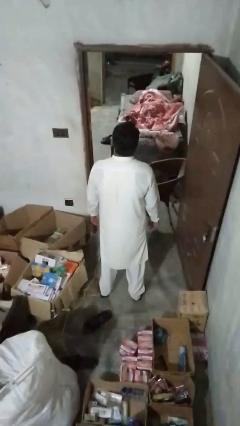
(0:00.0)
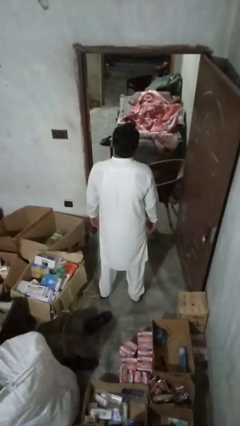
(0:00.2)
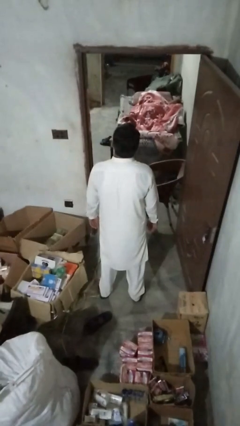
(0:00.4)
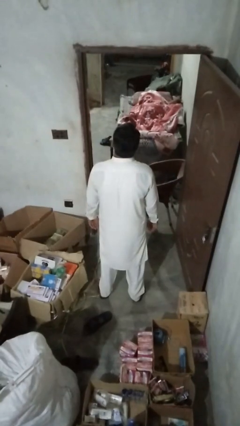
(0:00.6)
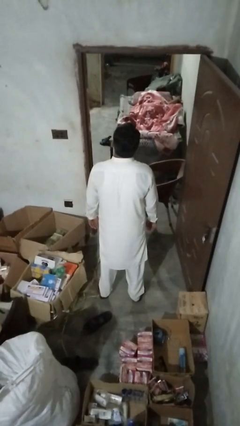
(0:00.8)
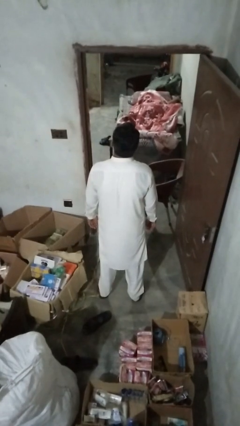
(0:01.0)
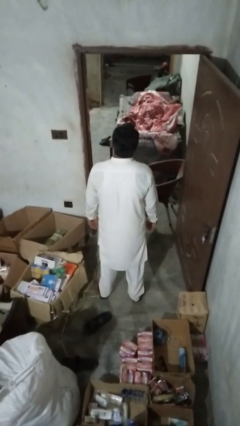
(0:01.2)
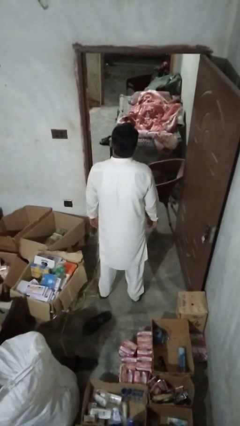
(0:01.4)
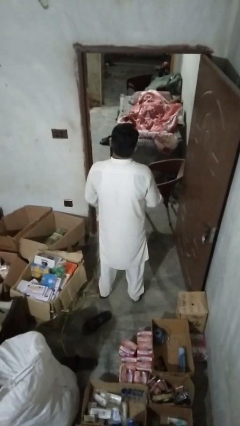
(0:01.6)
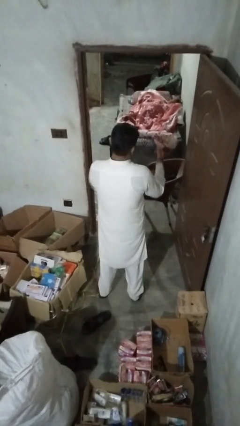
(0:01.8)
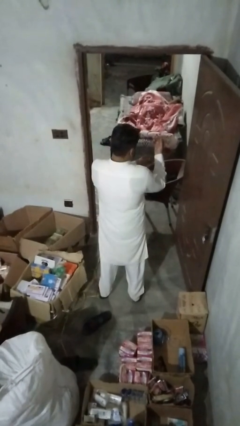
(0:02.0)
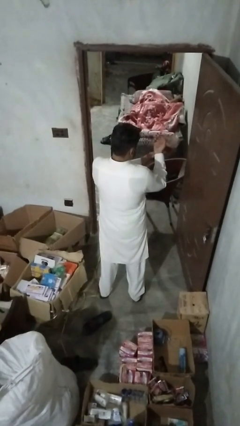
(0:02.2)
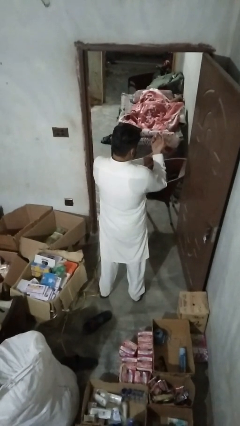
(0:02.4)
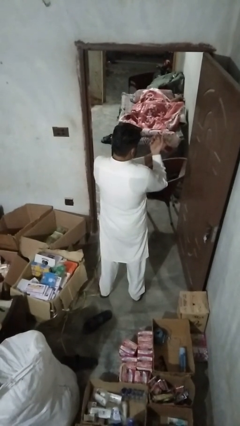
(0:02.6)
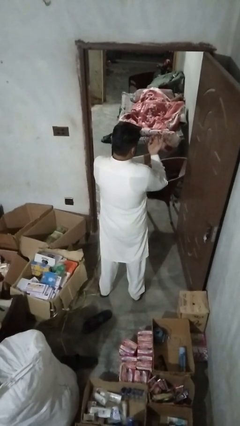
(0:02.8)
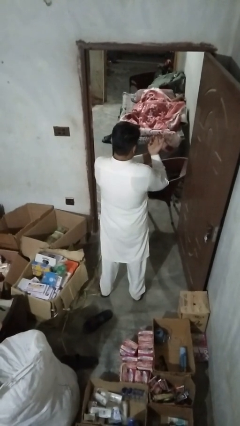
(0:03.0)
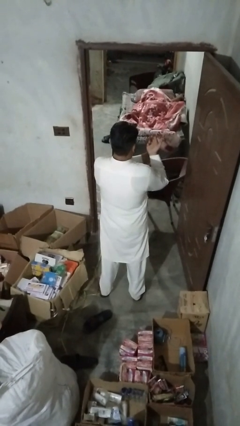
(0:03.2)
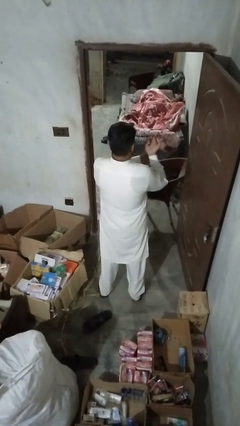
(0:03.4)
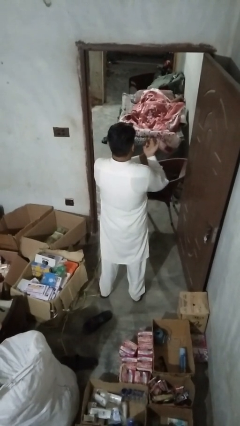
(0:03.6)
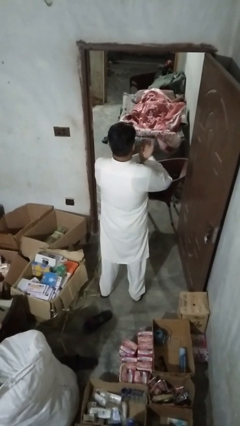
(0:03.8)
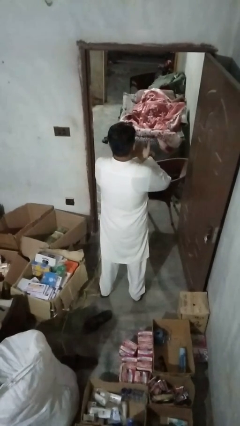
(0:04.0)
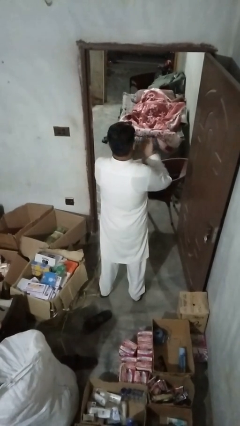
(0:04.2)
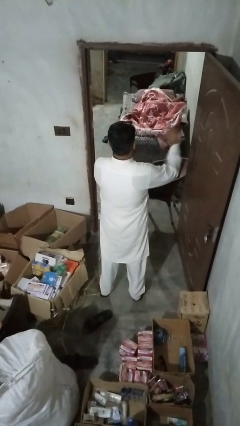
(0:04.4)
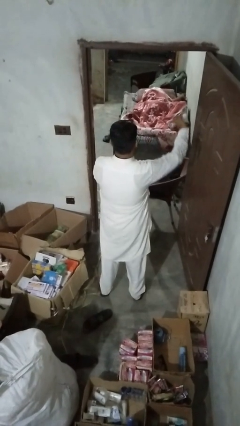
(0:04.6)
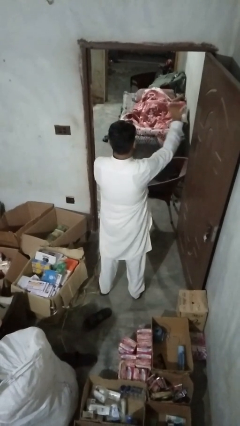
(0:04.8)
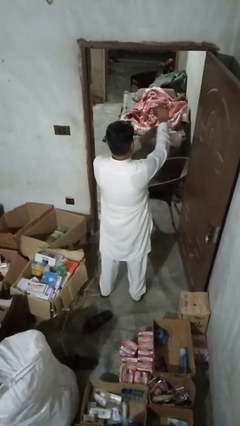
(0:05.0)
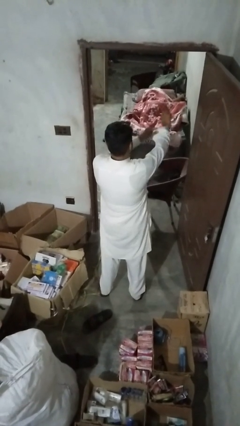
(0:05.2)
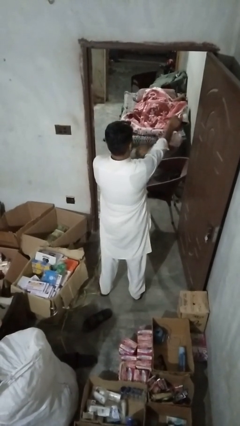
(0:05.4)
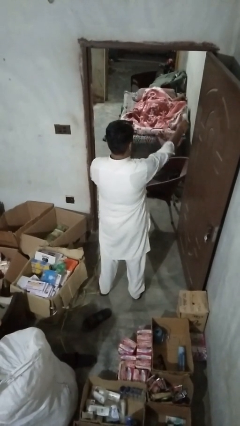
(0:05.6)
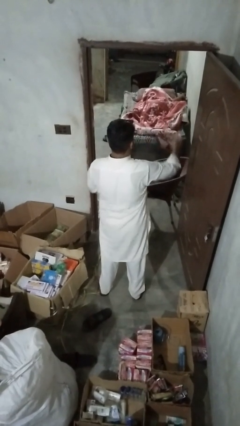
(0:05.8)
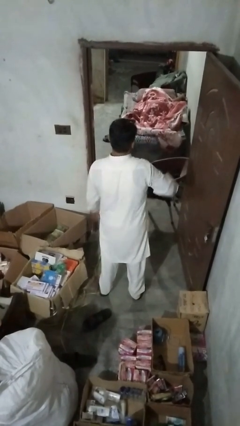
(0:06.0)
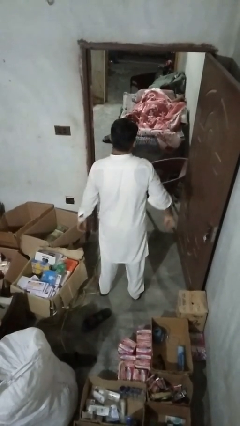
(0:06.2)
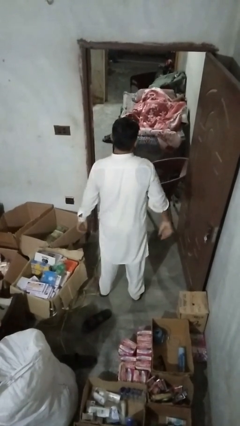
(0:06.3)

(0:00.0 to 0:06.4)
person unbuttons shirt

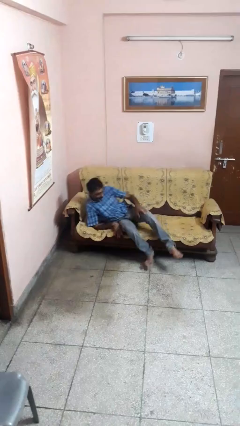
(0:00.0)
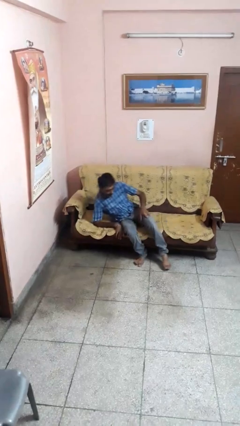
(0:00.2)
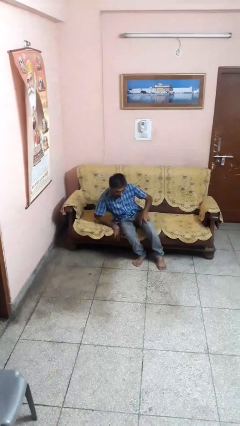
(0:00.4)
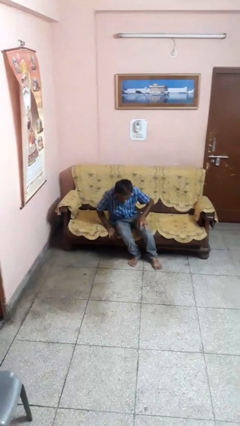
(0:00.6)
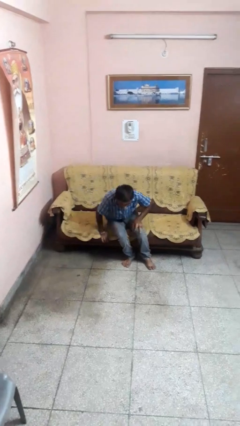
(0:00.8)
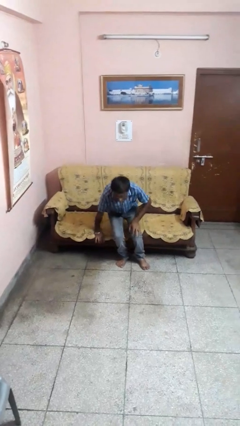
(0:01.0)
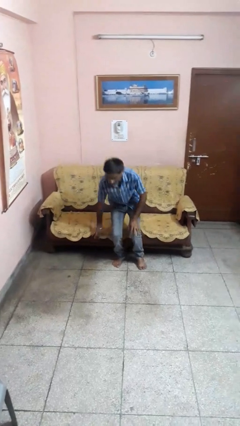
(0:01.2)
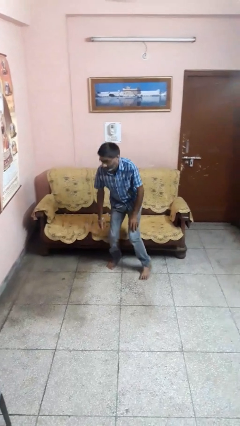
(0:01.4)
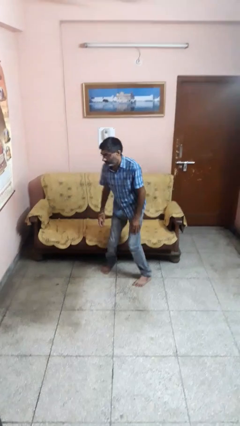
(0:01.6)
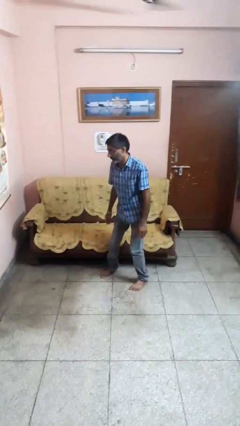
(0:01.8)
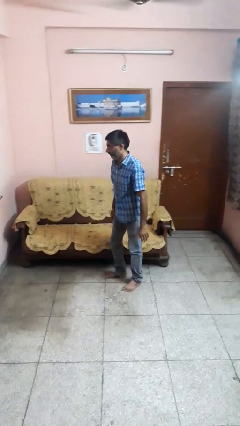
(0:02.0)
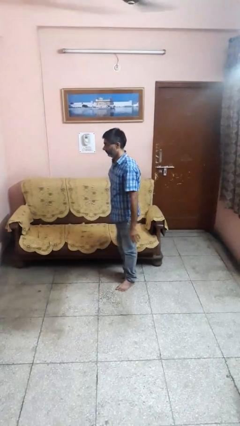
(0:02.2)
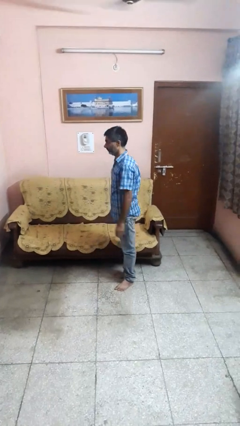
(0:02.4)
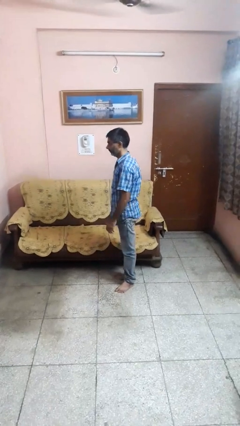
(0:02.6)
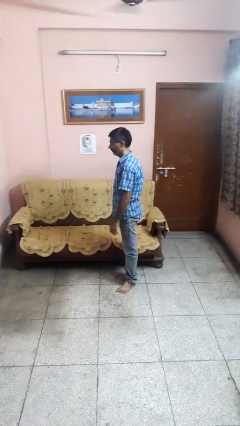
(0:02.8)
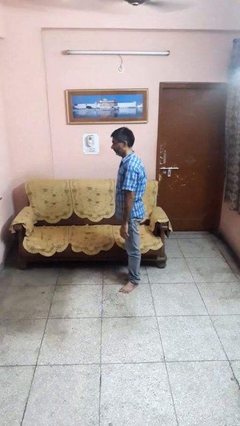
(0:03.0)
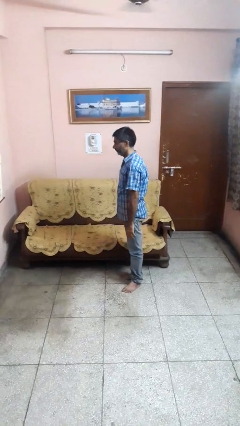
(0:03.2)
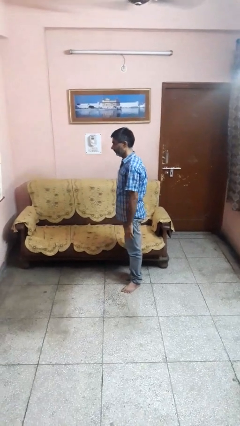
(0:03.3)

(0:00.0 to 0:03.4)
person stands up

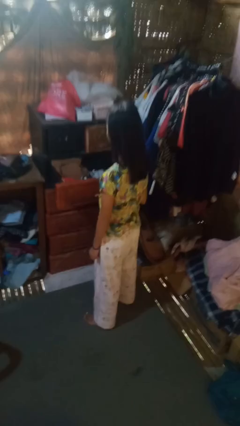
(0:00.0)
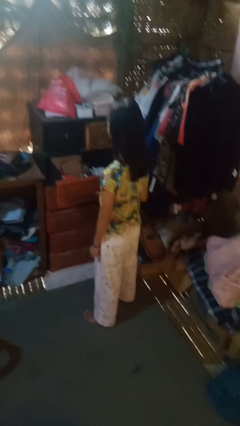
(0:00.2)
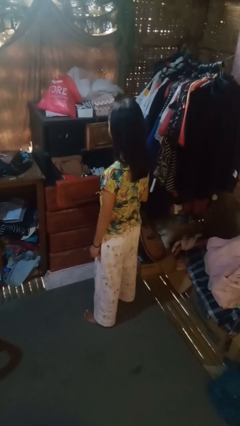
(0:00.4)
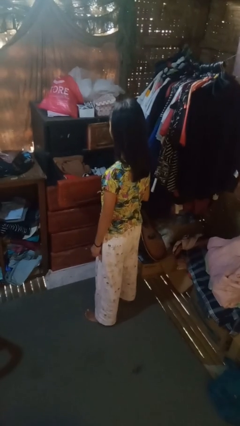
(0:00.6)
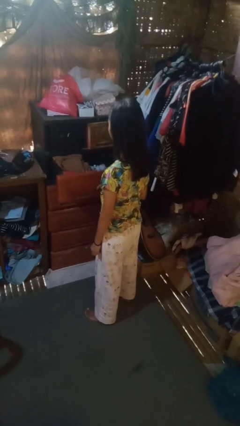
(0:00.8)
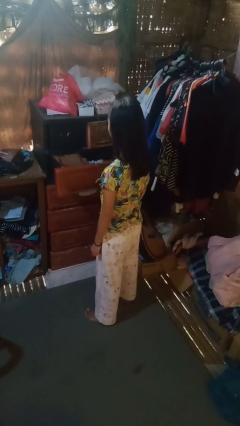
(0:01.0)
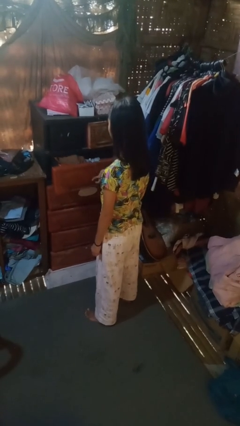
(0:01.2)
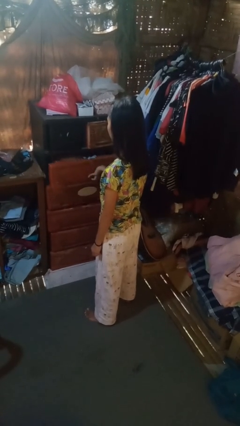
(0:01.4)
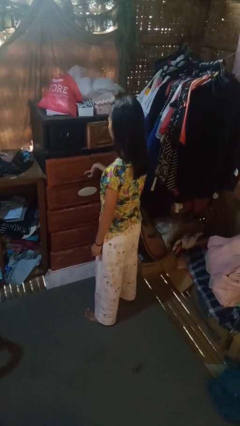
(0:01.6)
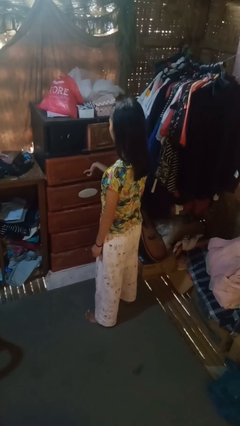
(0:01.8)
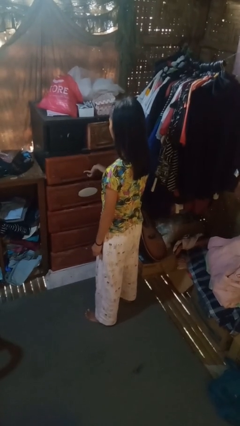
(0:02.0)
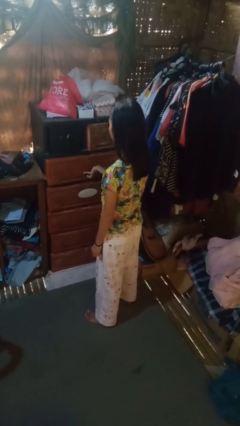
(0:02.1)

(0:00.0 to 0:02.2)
person closes dresser drawer

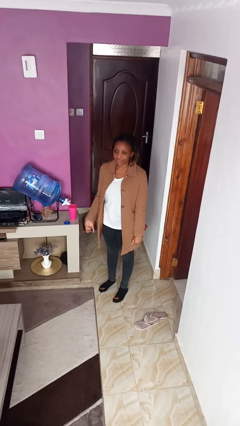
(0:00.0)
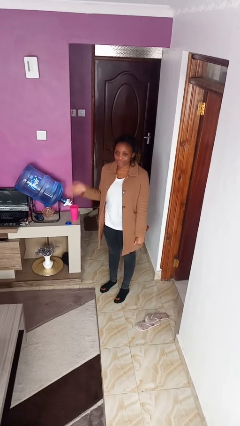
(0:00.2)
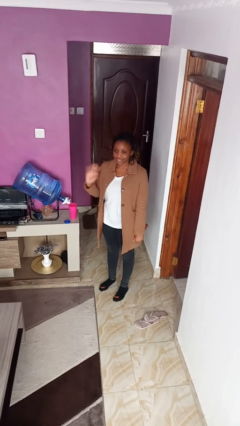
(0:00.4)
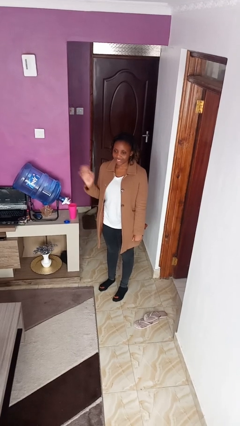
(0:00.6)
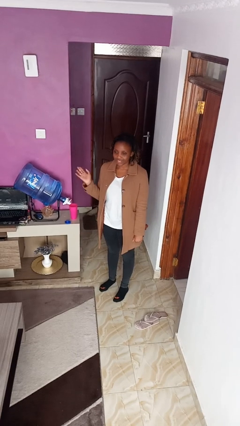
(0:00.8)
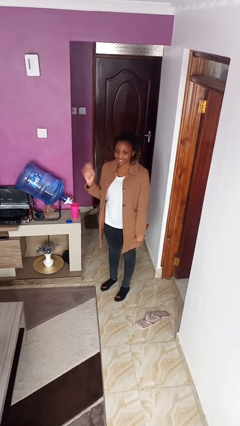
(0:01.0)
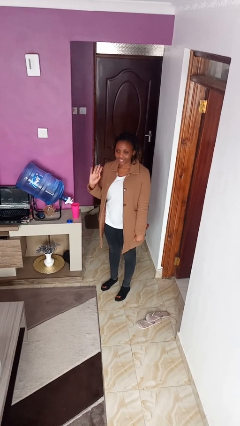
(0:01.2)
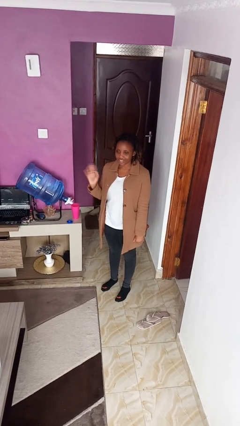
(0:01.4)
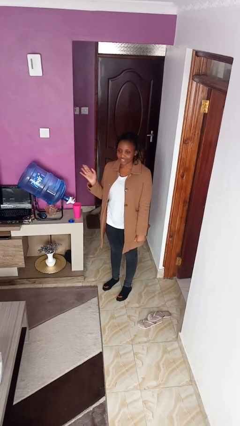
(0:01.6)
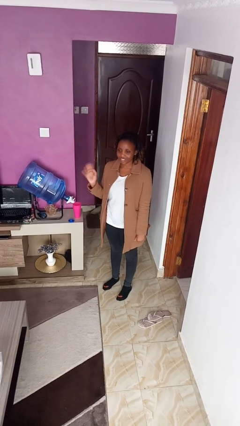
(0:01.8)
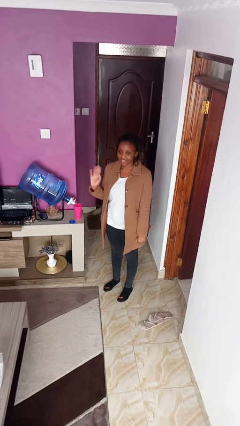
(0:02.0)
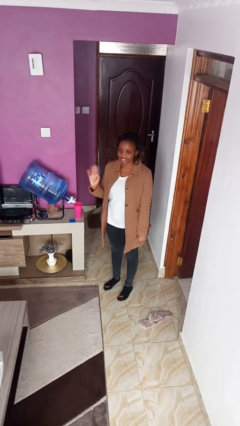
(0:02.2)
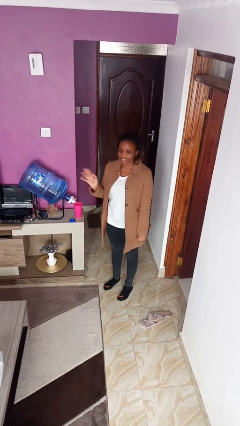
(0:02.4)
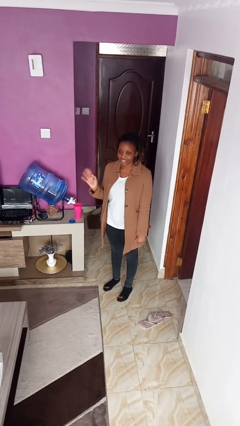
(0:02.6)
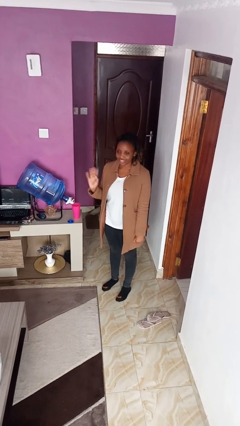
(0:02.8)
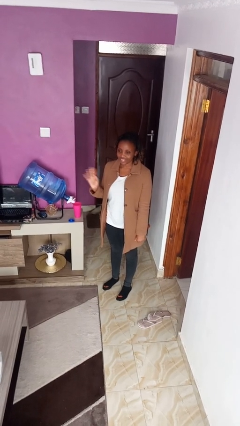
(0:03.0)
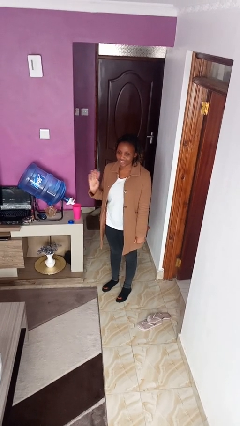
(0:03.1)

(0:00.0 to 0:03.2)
person waves at person

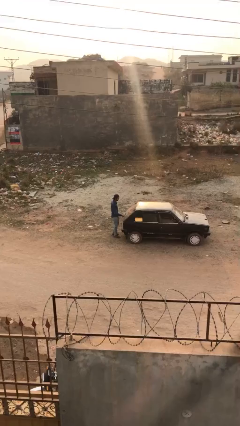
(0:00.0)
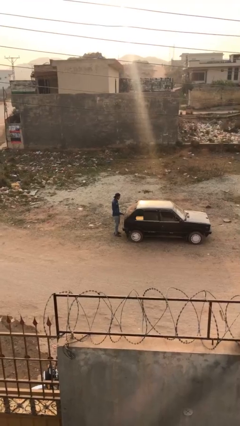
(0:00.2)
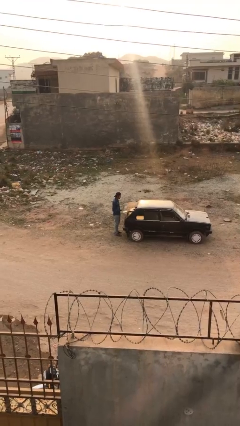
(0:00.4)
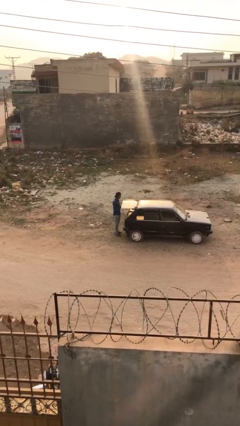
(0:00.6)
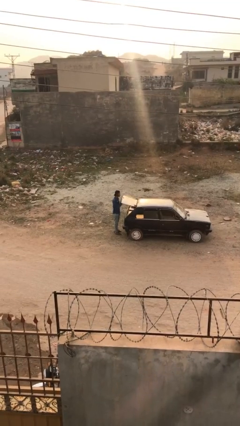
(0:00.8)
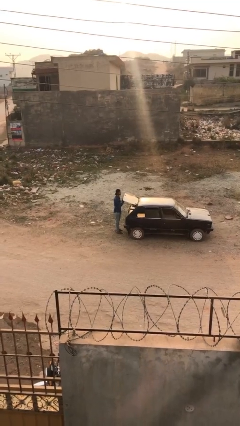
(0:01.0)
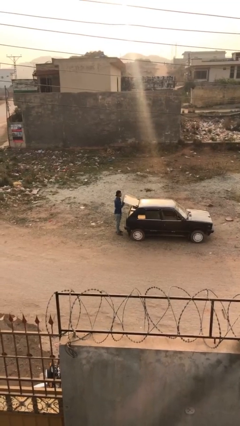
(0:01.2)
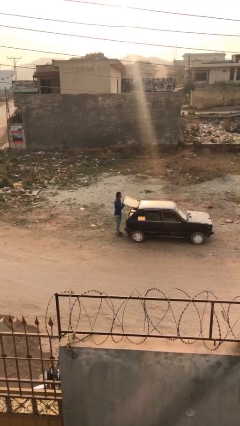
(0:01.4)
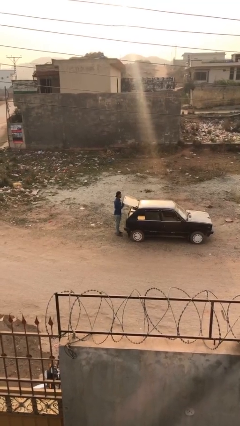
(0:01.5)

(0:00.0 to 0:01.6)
person opens car trunk

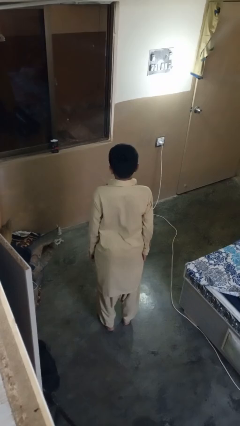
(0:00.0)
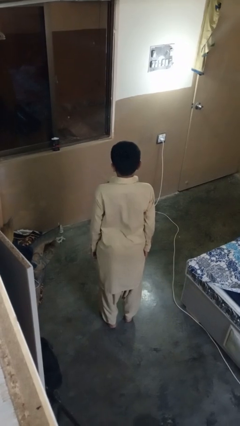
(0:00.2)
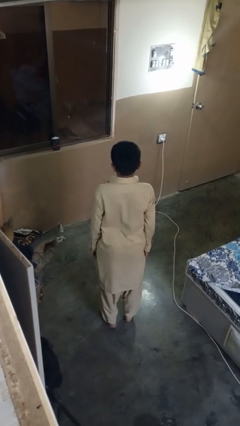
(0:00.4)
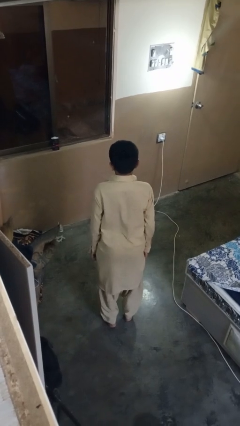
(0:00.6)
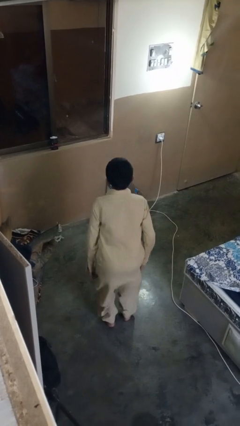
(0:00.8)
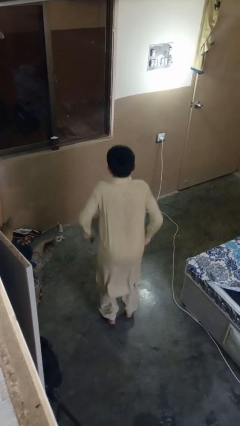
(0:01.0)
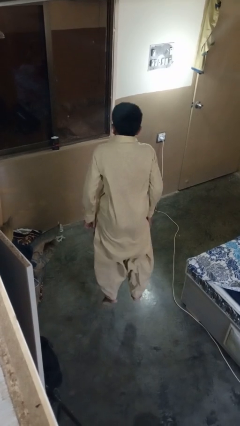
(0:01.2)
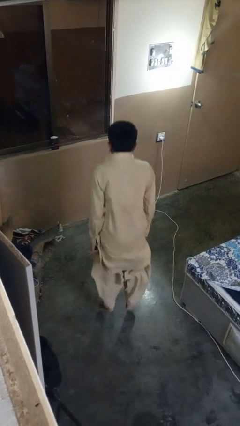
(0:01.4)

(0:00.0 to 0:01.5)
person jumps
